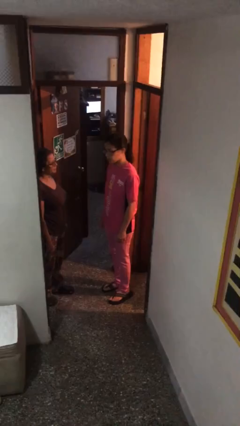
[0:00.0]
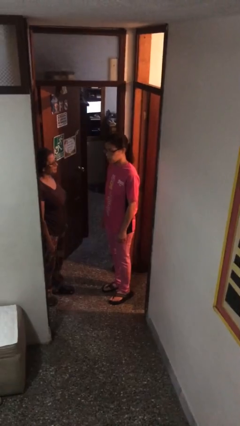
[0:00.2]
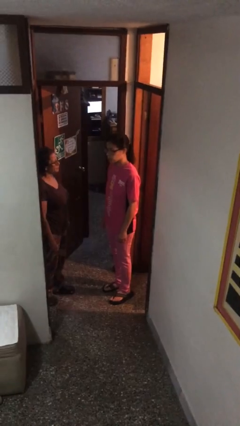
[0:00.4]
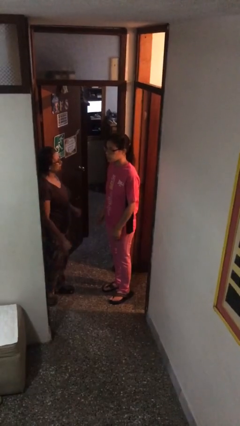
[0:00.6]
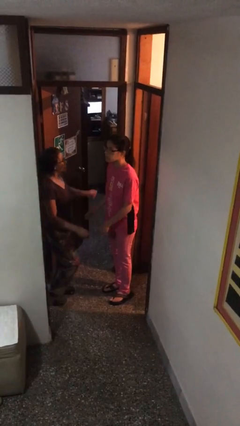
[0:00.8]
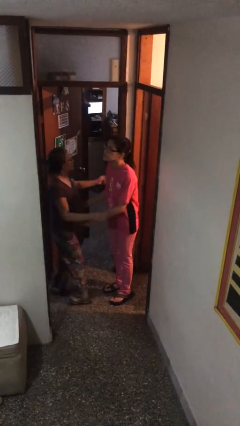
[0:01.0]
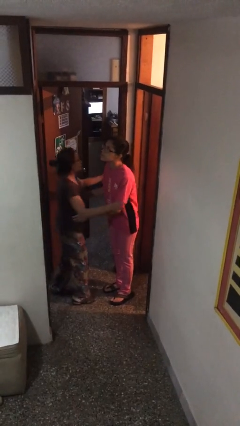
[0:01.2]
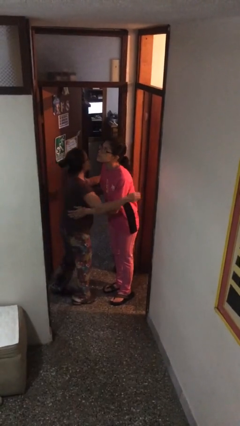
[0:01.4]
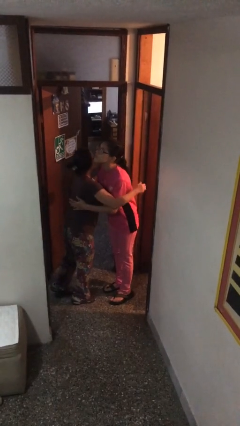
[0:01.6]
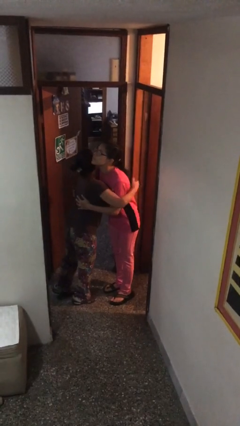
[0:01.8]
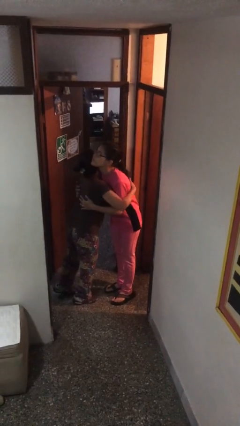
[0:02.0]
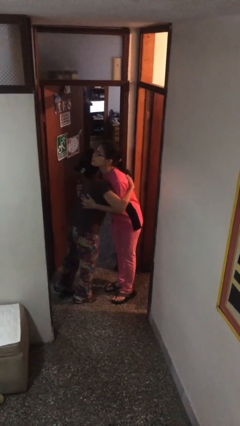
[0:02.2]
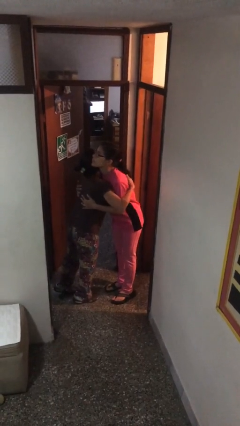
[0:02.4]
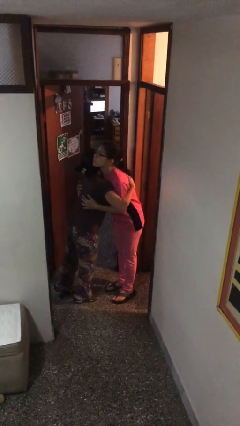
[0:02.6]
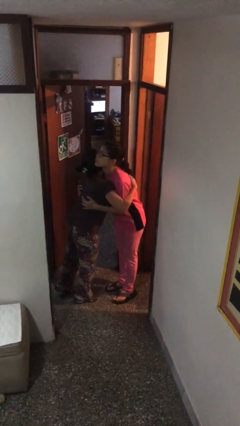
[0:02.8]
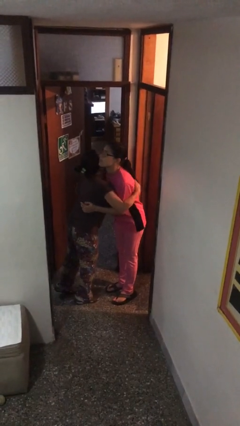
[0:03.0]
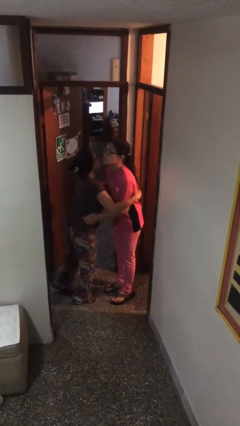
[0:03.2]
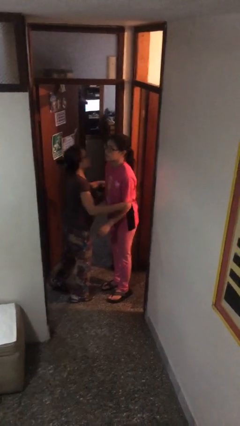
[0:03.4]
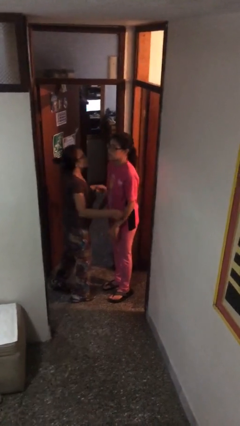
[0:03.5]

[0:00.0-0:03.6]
person embraces person

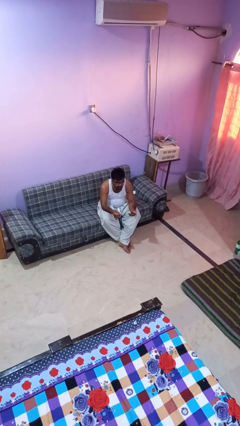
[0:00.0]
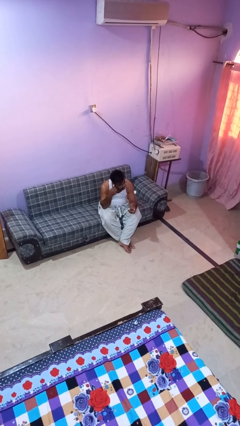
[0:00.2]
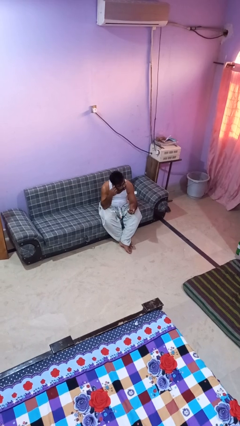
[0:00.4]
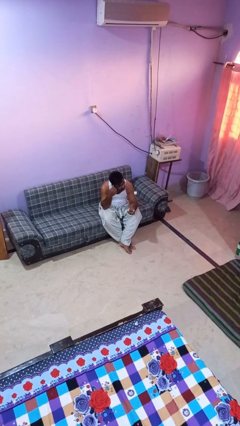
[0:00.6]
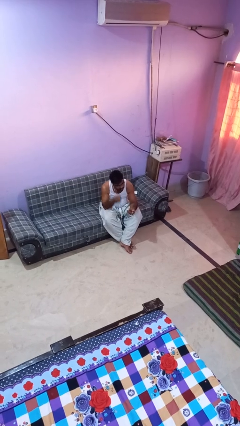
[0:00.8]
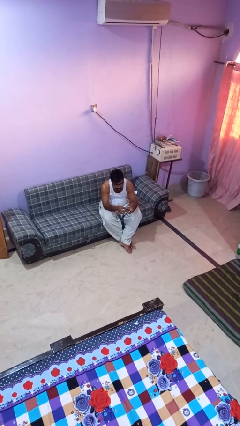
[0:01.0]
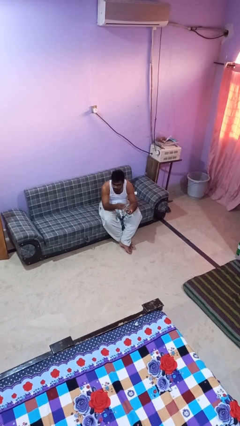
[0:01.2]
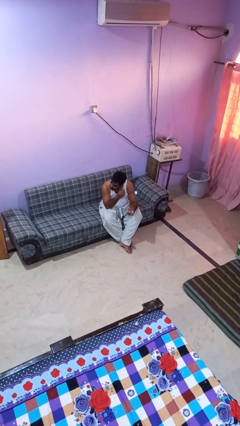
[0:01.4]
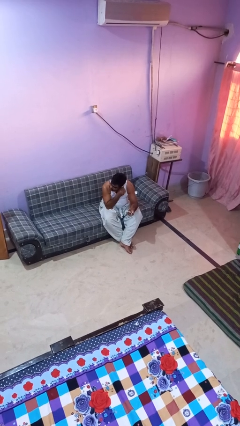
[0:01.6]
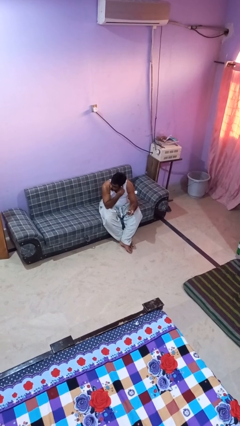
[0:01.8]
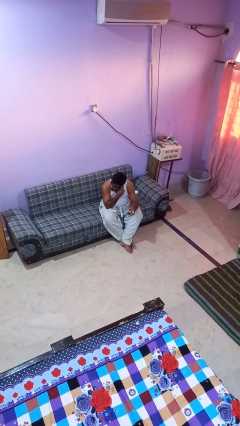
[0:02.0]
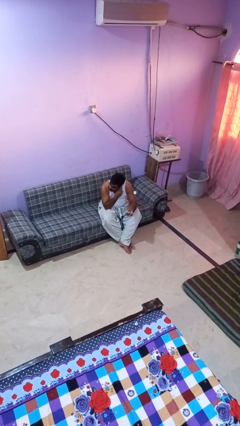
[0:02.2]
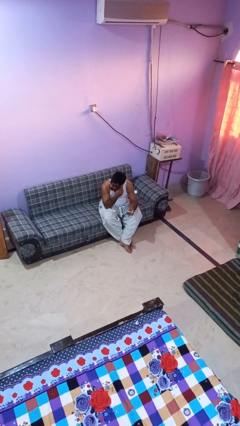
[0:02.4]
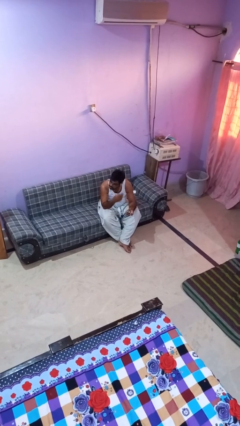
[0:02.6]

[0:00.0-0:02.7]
person puts on headphones

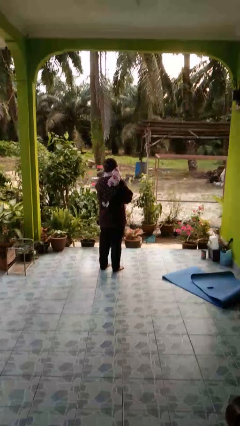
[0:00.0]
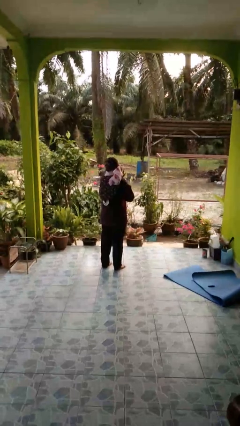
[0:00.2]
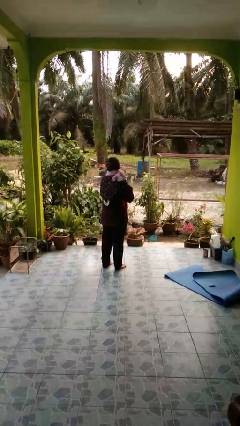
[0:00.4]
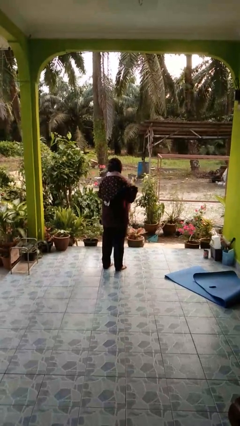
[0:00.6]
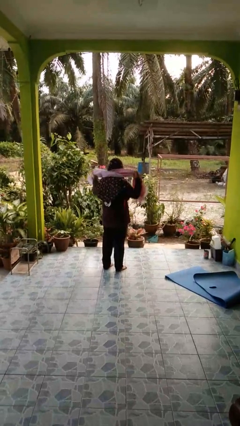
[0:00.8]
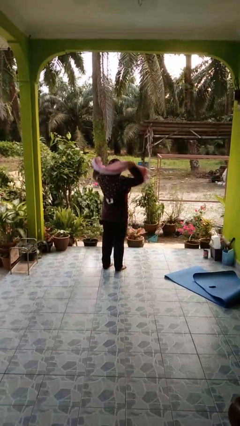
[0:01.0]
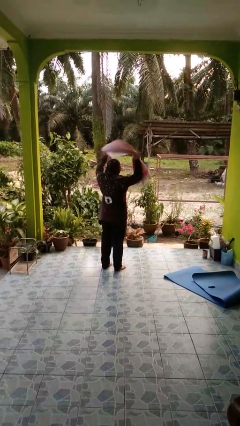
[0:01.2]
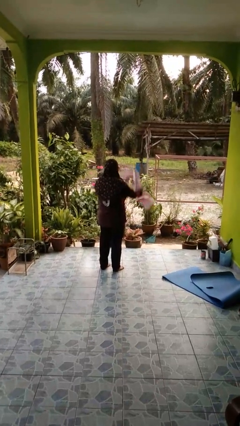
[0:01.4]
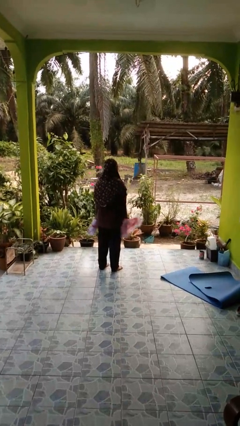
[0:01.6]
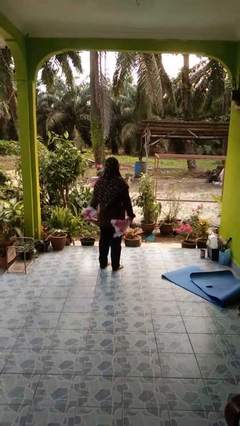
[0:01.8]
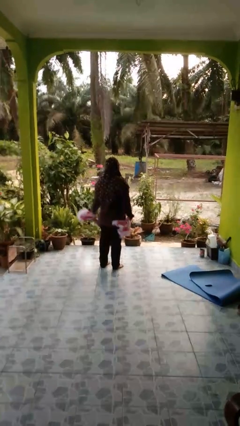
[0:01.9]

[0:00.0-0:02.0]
person takes off scarf

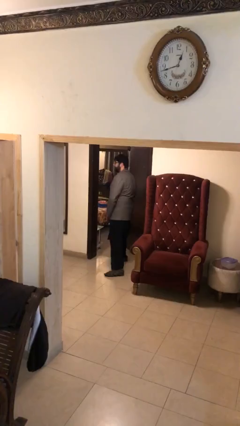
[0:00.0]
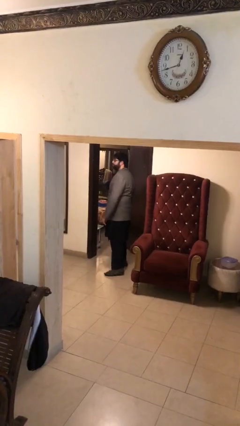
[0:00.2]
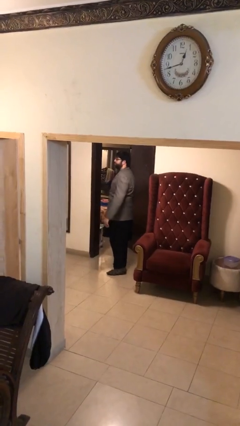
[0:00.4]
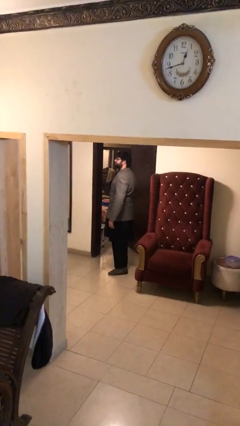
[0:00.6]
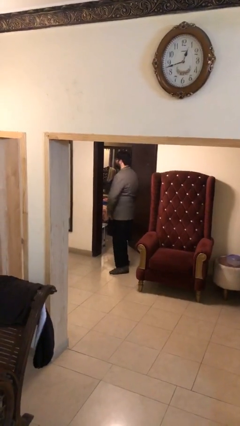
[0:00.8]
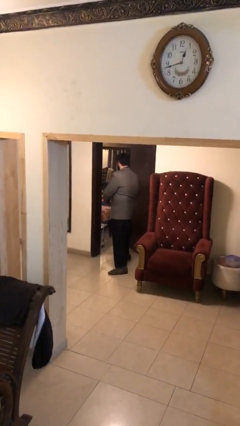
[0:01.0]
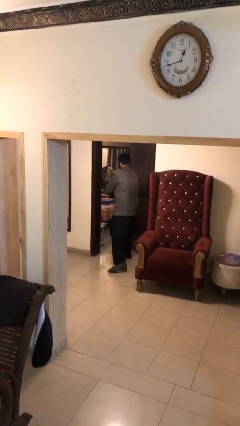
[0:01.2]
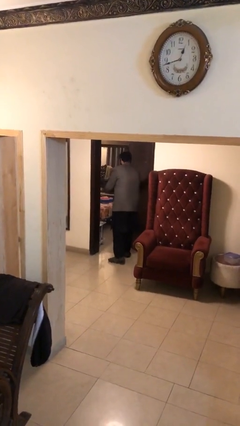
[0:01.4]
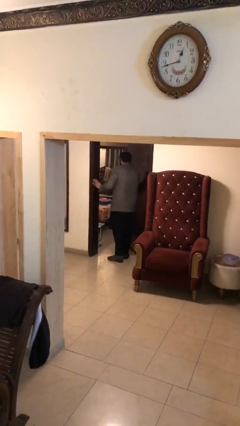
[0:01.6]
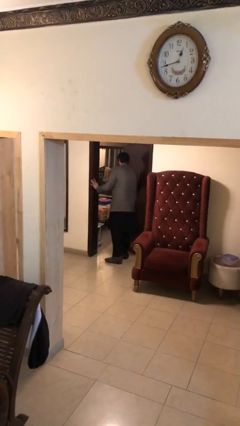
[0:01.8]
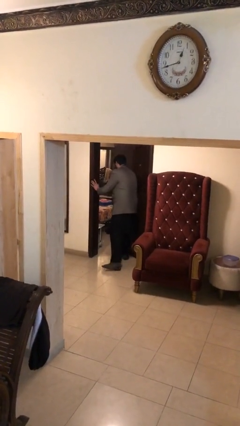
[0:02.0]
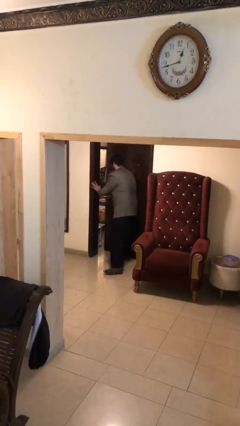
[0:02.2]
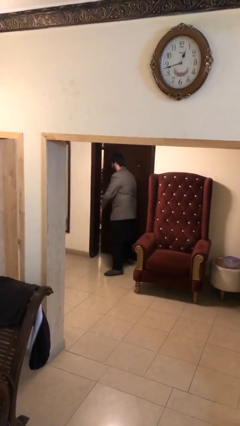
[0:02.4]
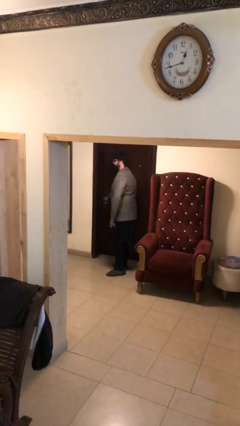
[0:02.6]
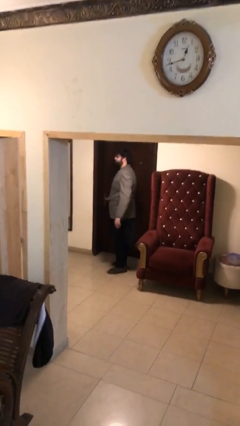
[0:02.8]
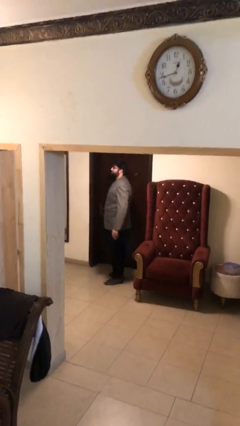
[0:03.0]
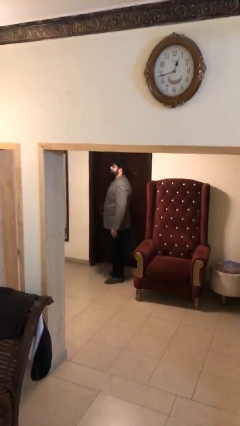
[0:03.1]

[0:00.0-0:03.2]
person closes facility door

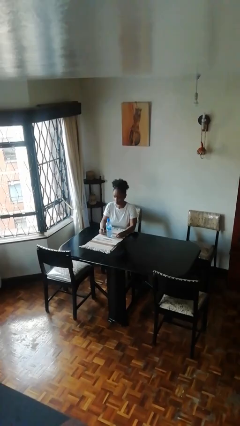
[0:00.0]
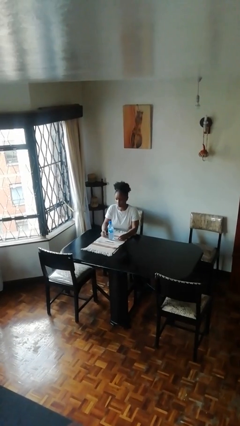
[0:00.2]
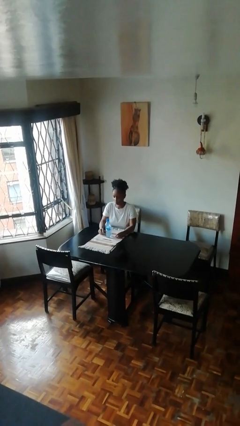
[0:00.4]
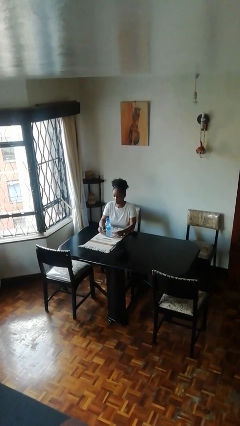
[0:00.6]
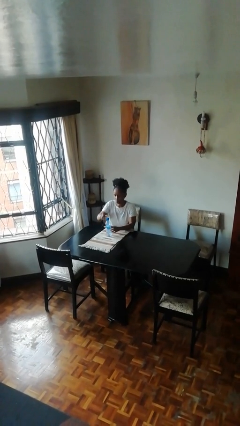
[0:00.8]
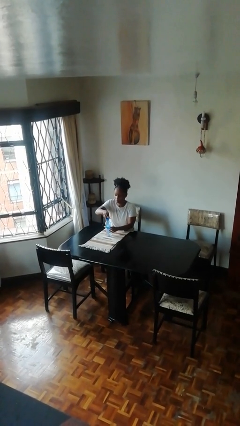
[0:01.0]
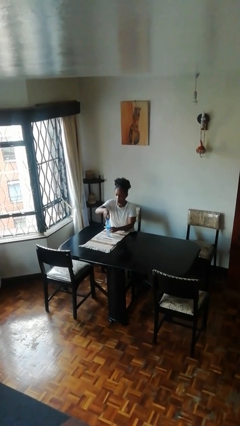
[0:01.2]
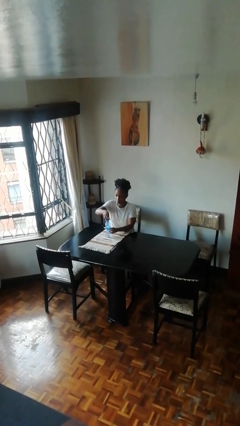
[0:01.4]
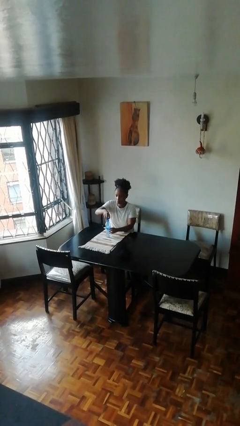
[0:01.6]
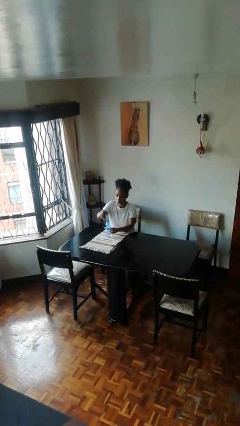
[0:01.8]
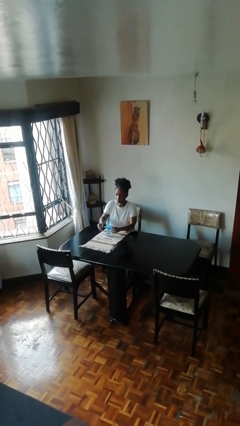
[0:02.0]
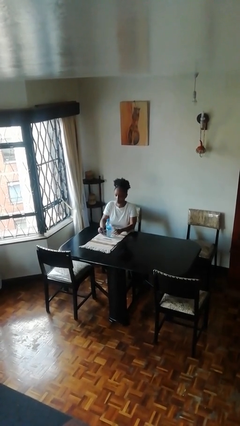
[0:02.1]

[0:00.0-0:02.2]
person unscrews lid from bottle

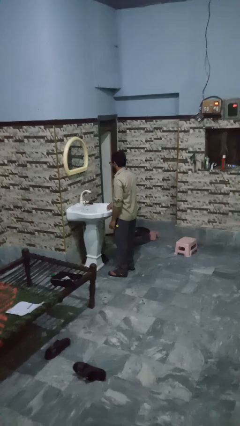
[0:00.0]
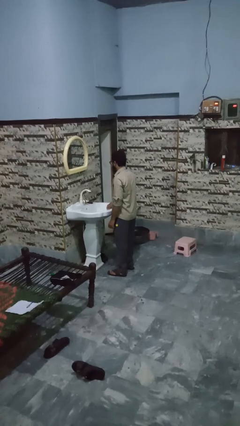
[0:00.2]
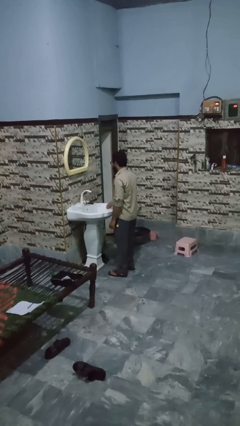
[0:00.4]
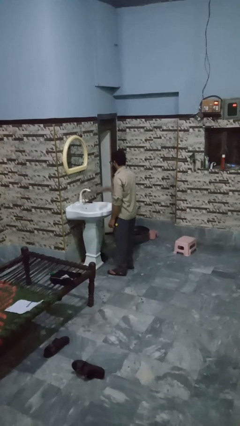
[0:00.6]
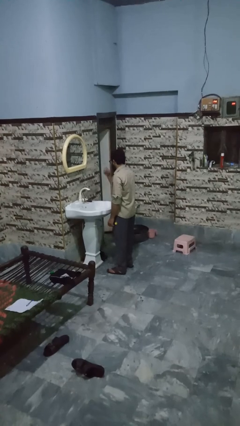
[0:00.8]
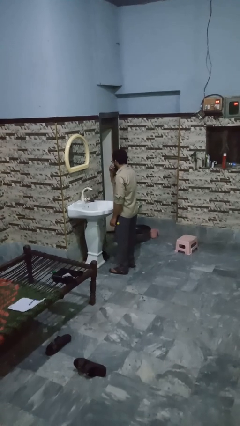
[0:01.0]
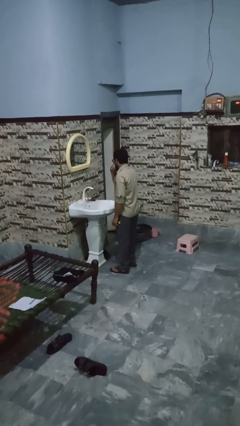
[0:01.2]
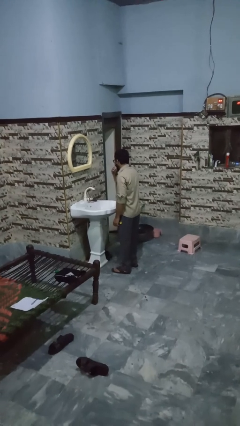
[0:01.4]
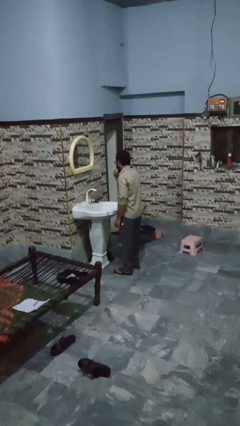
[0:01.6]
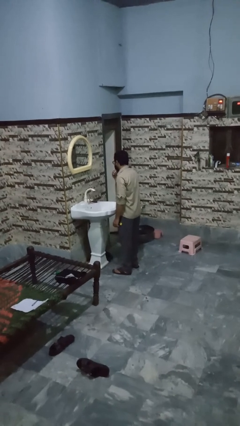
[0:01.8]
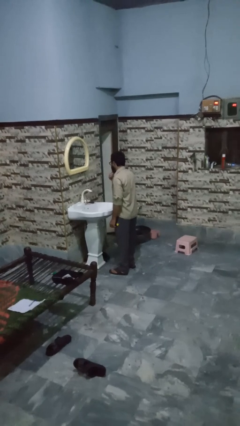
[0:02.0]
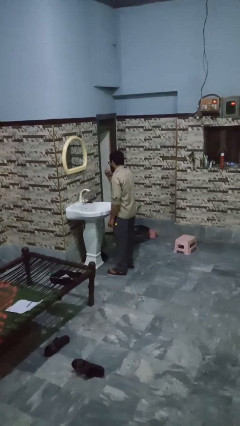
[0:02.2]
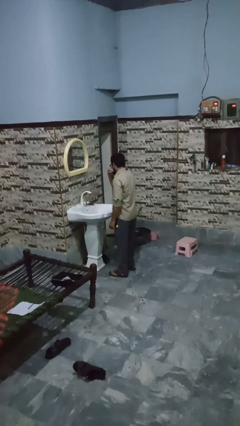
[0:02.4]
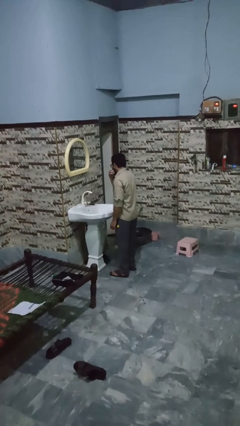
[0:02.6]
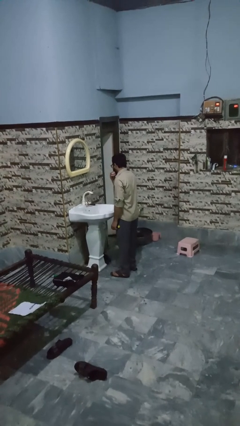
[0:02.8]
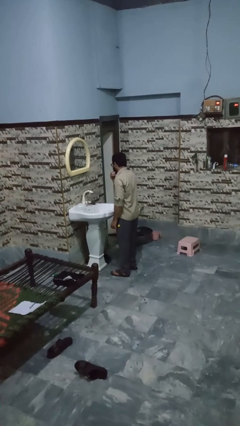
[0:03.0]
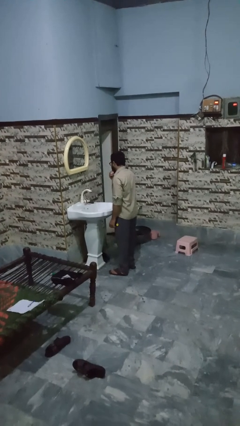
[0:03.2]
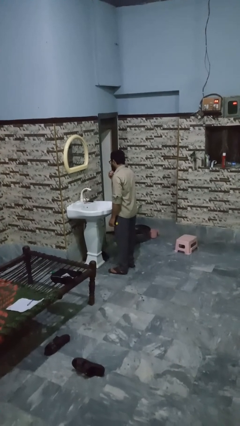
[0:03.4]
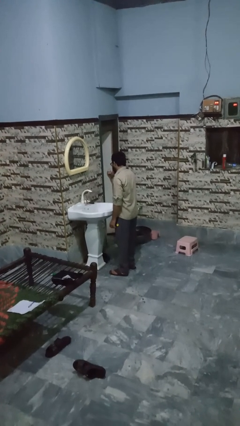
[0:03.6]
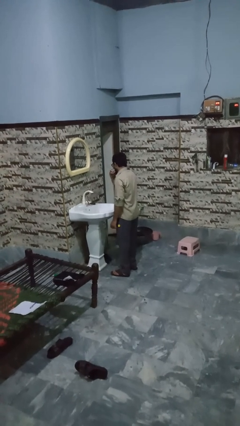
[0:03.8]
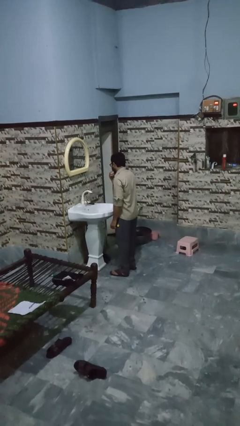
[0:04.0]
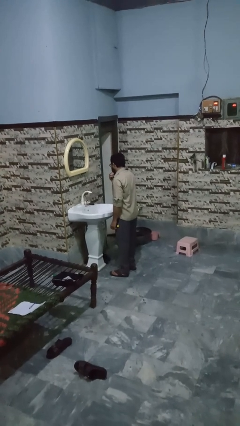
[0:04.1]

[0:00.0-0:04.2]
person shaves face
